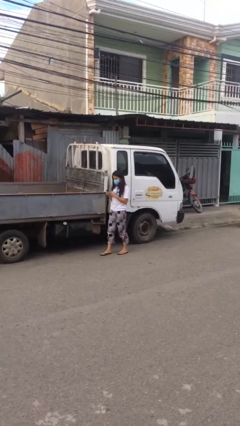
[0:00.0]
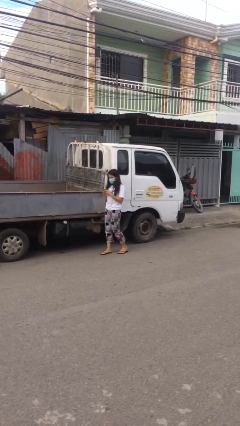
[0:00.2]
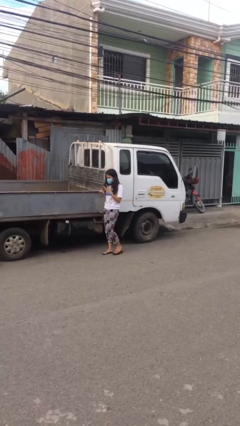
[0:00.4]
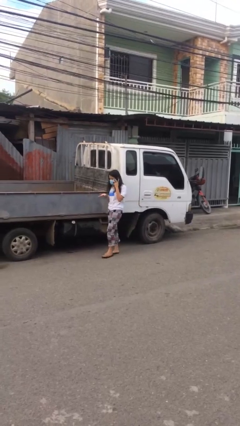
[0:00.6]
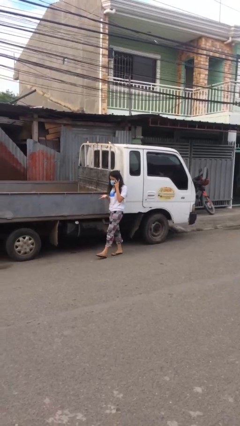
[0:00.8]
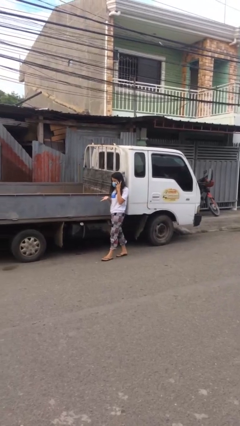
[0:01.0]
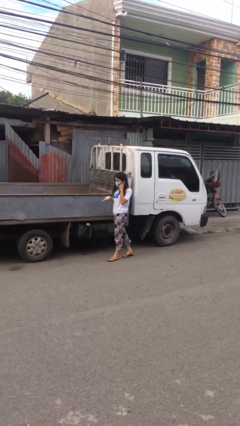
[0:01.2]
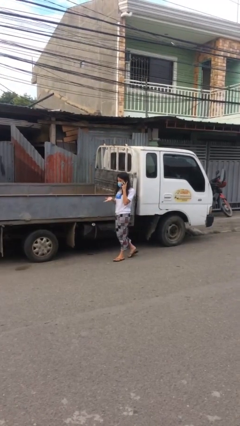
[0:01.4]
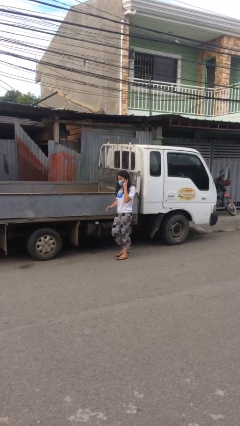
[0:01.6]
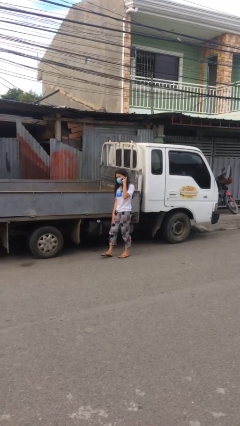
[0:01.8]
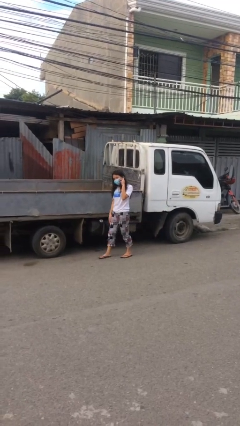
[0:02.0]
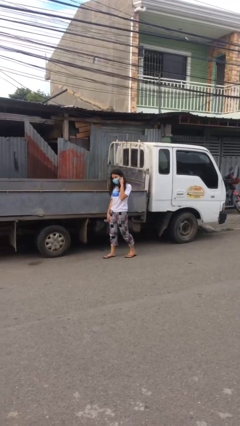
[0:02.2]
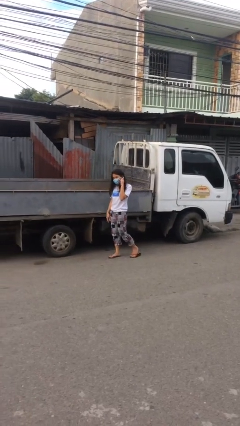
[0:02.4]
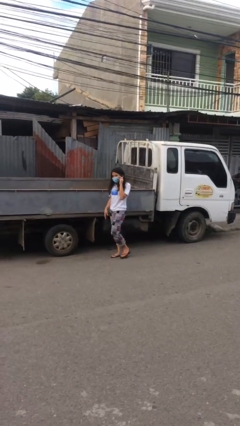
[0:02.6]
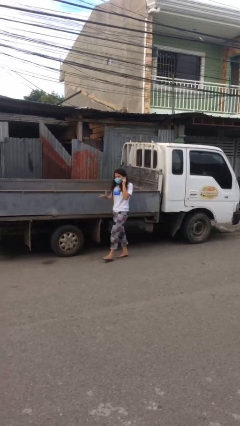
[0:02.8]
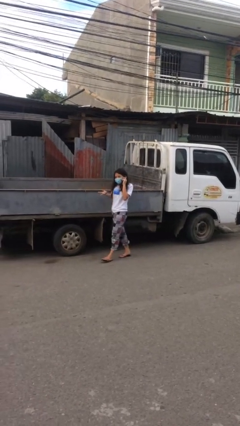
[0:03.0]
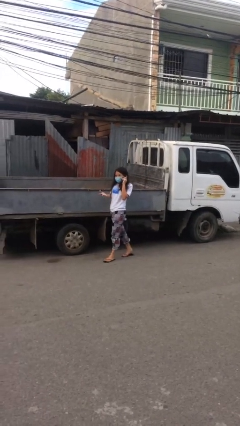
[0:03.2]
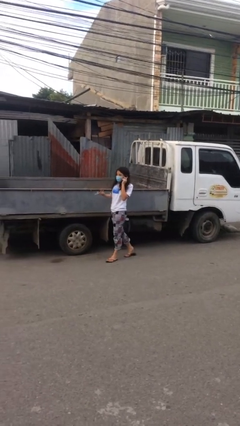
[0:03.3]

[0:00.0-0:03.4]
person talks on phone

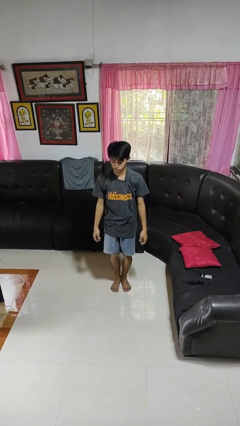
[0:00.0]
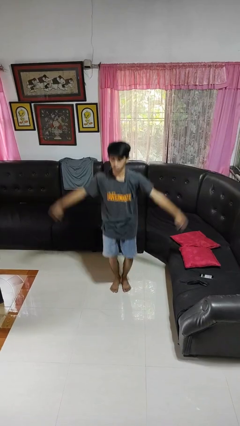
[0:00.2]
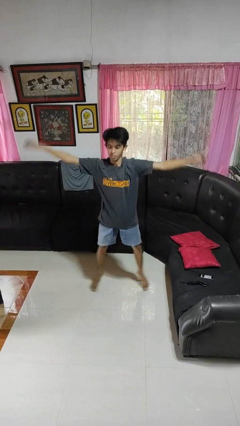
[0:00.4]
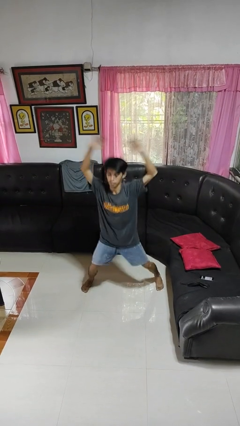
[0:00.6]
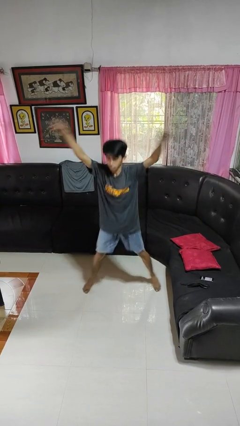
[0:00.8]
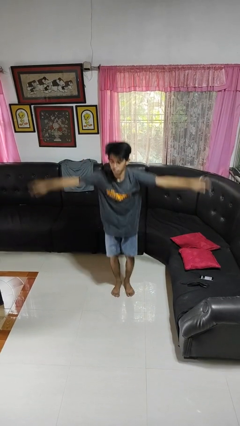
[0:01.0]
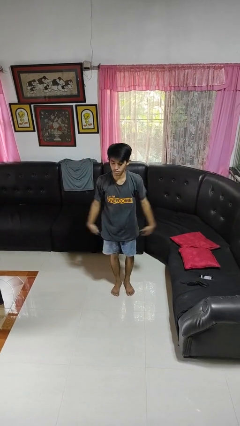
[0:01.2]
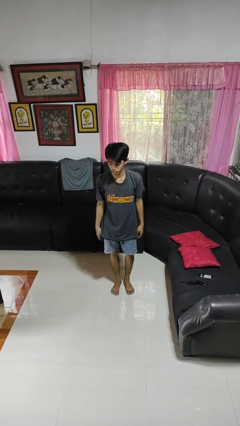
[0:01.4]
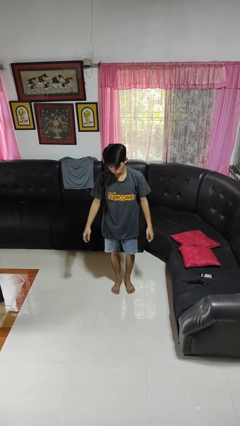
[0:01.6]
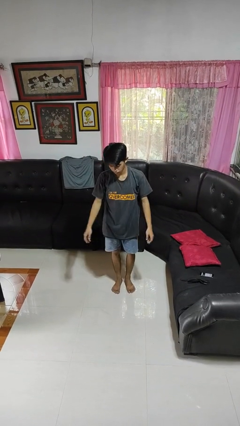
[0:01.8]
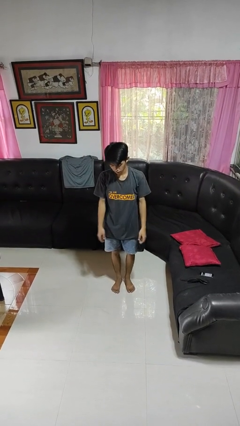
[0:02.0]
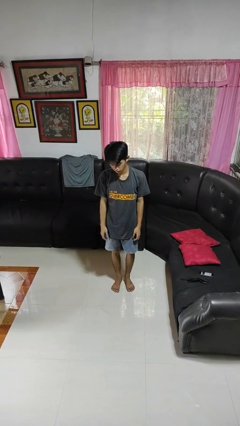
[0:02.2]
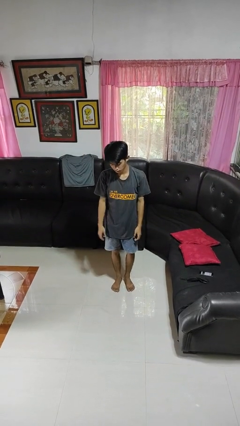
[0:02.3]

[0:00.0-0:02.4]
person exercises with jumping jacks

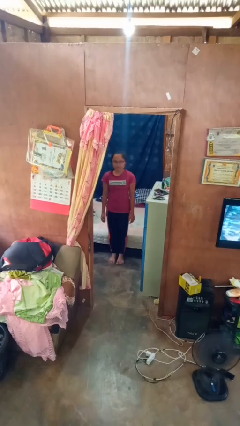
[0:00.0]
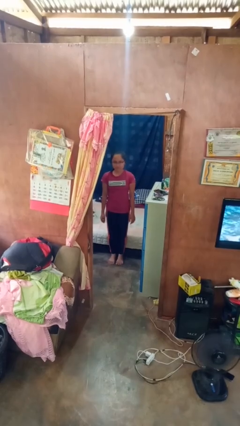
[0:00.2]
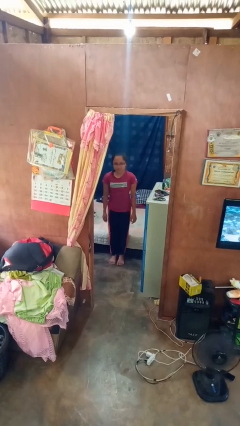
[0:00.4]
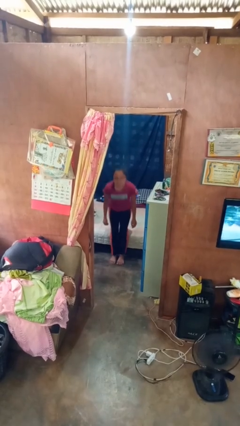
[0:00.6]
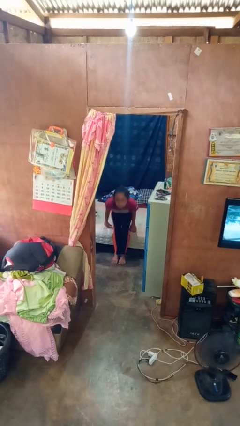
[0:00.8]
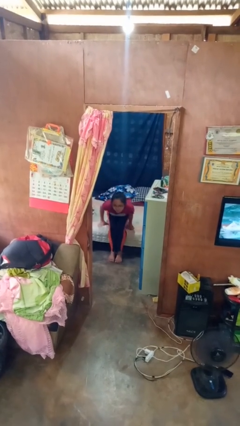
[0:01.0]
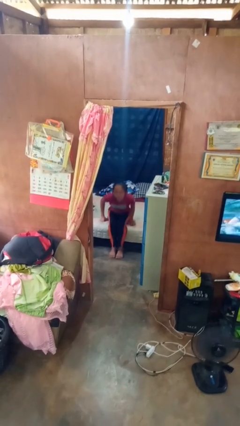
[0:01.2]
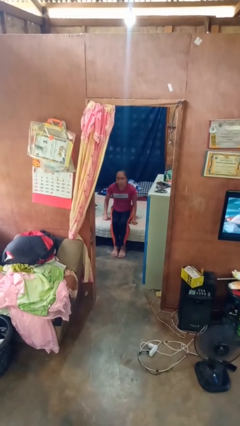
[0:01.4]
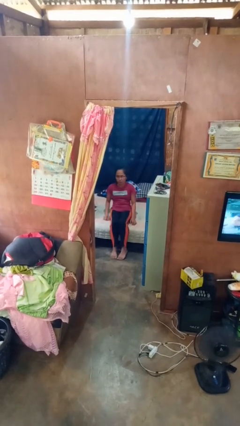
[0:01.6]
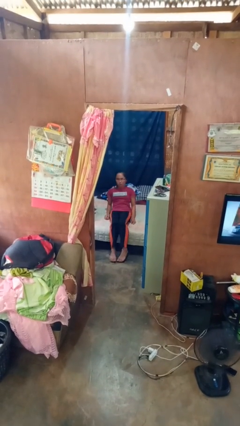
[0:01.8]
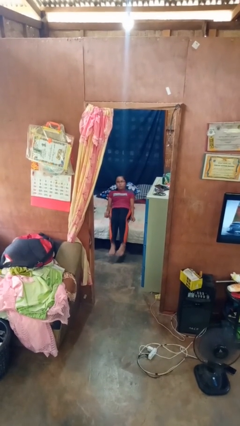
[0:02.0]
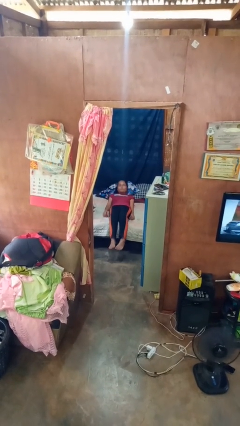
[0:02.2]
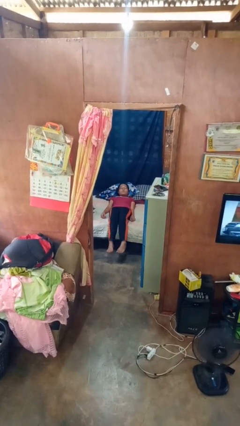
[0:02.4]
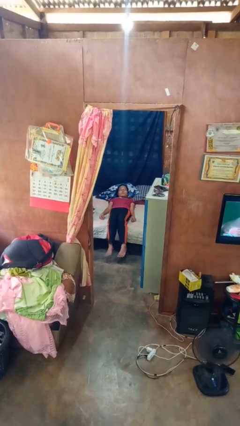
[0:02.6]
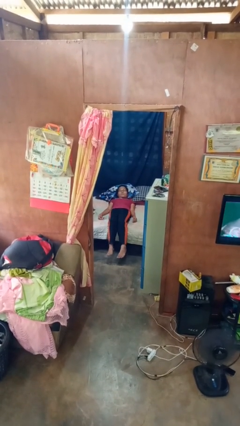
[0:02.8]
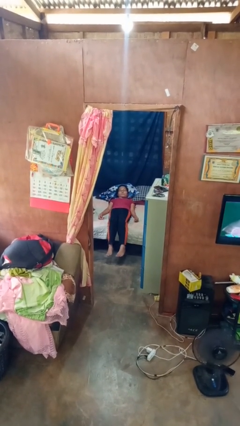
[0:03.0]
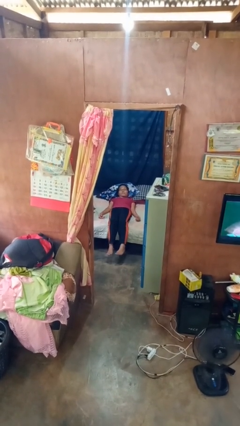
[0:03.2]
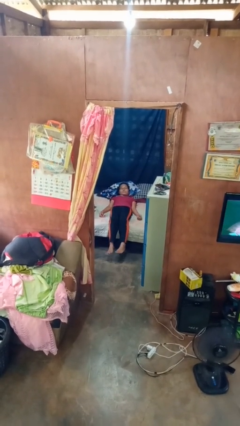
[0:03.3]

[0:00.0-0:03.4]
person lies down on bed

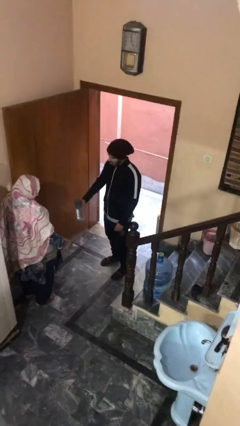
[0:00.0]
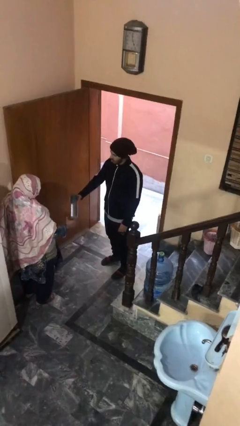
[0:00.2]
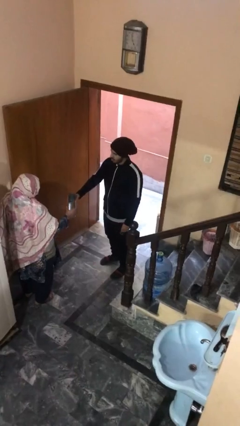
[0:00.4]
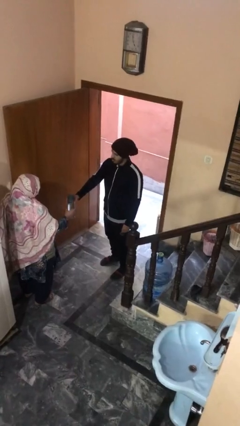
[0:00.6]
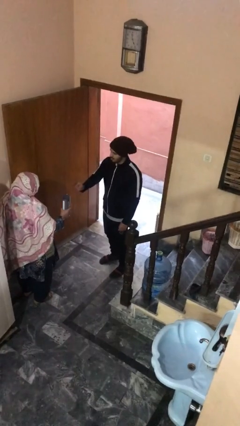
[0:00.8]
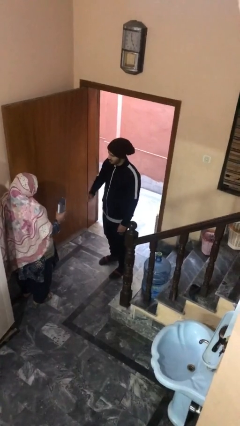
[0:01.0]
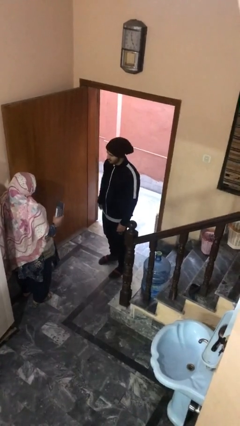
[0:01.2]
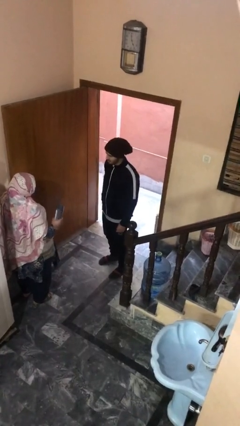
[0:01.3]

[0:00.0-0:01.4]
person transfers object to person

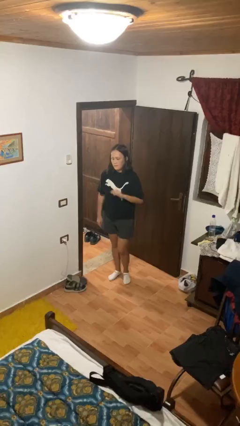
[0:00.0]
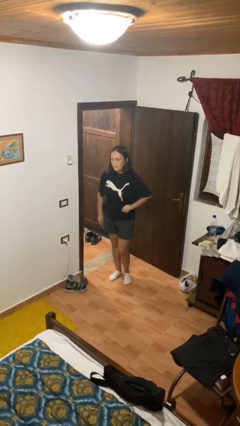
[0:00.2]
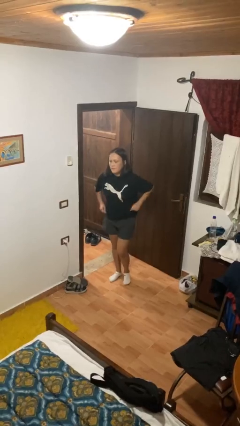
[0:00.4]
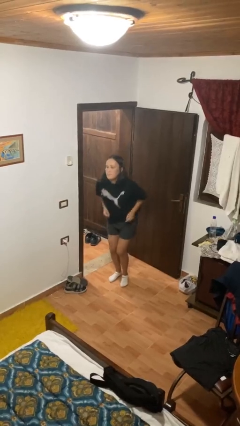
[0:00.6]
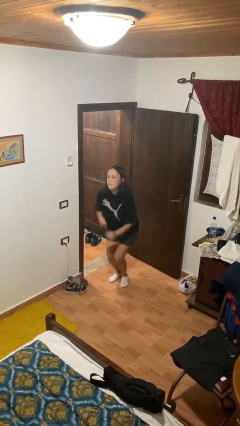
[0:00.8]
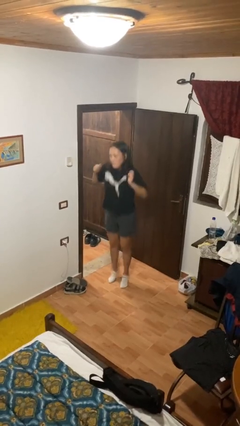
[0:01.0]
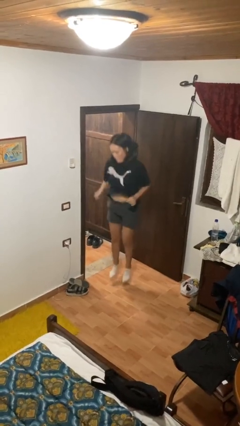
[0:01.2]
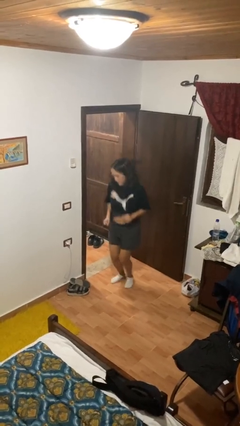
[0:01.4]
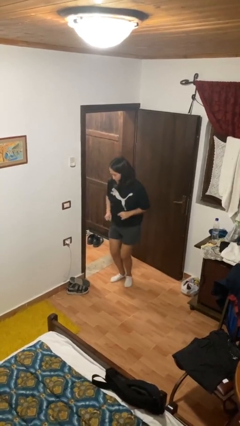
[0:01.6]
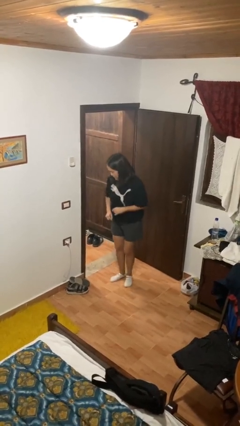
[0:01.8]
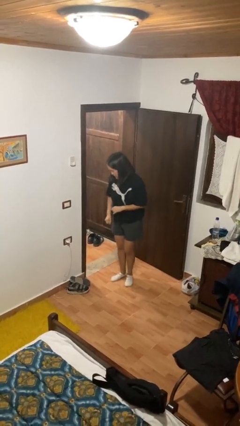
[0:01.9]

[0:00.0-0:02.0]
person jumps

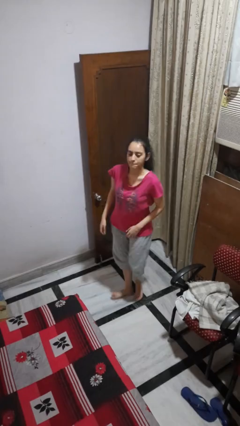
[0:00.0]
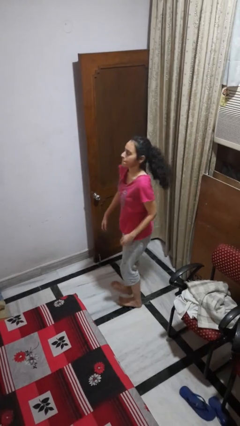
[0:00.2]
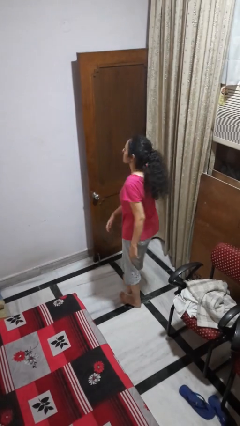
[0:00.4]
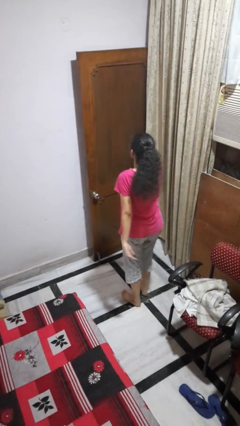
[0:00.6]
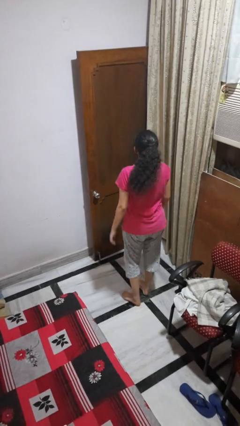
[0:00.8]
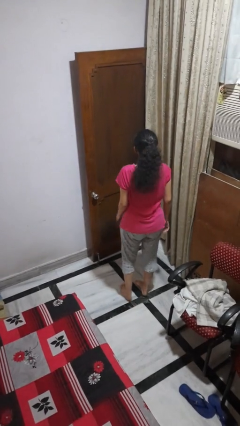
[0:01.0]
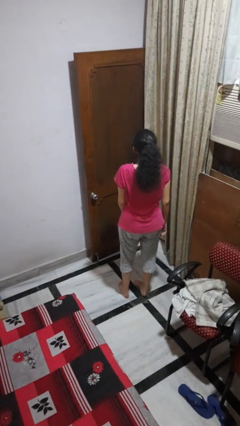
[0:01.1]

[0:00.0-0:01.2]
person twirls

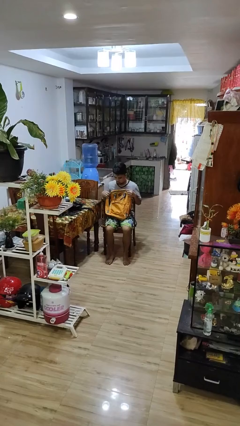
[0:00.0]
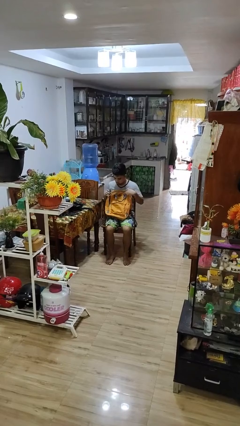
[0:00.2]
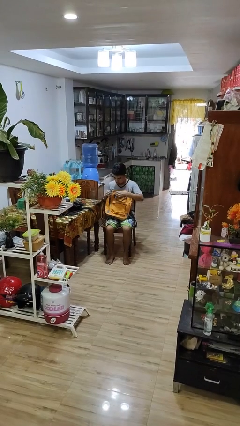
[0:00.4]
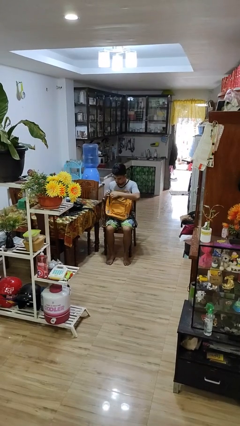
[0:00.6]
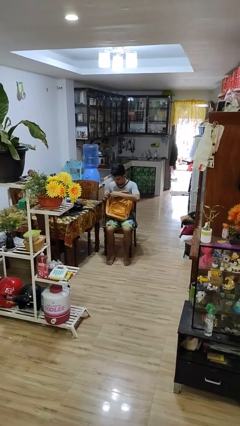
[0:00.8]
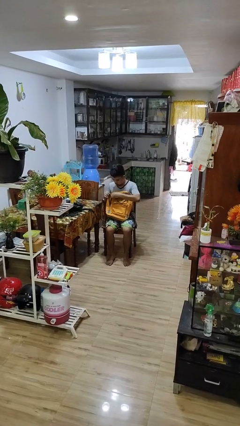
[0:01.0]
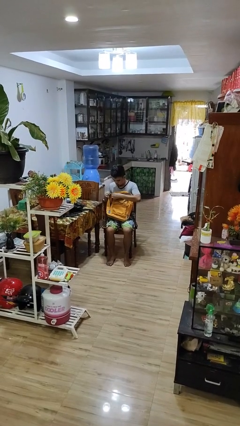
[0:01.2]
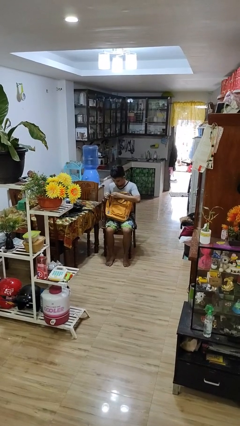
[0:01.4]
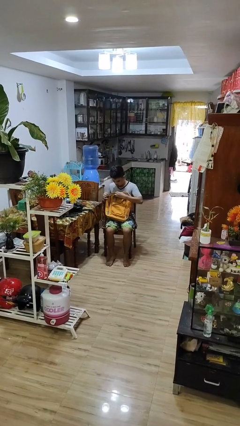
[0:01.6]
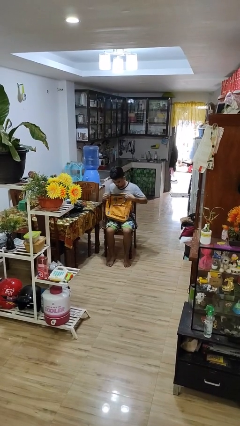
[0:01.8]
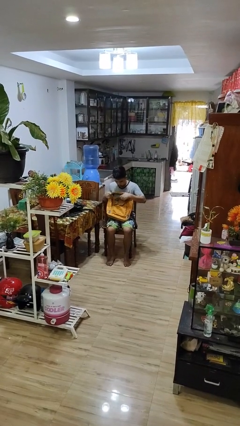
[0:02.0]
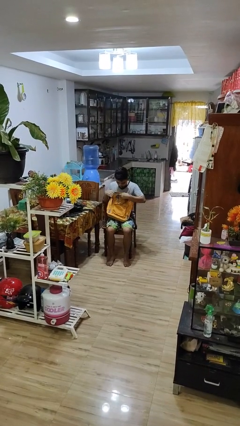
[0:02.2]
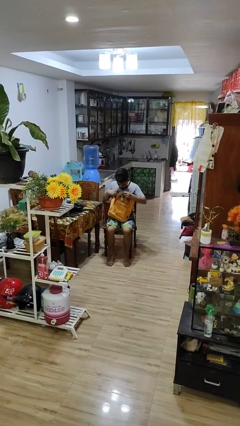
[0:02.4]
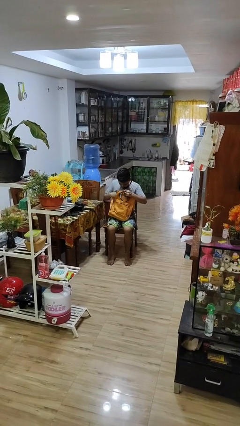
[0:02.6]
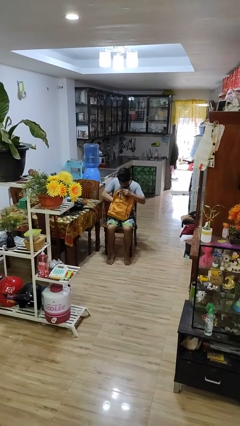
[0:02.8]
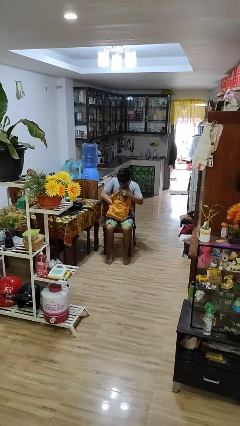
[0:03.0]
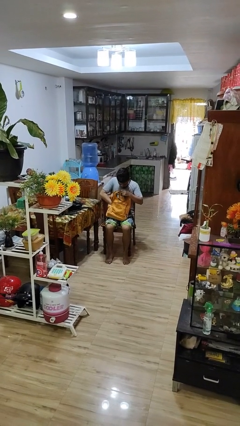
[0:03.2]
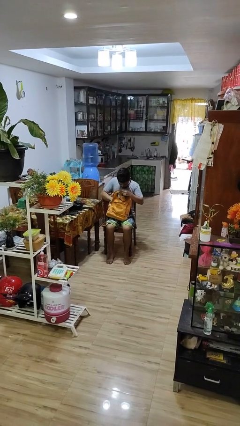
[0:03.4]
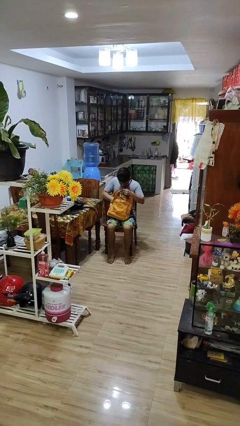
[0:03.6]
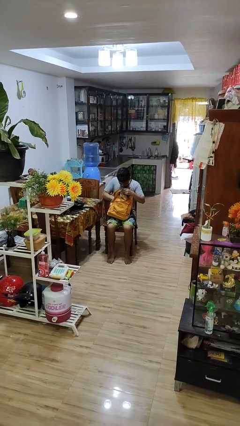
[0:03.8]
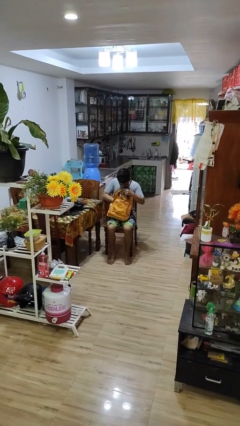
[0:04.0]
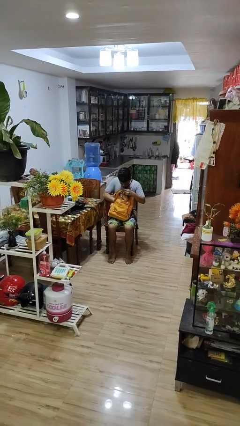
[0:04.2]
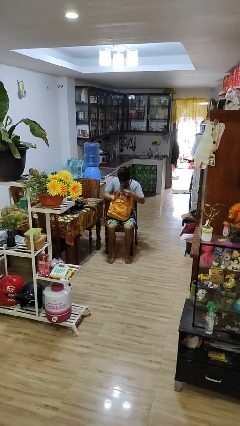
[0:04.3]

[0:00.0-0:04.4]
person searches in backpack
